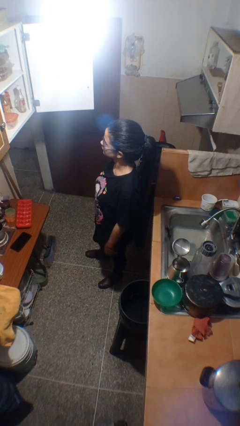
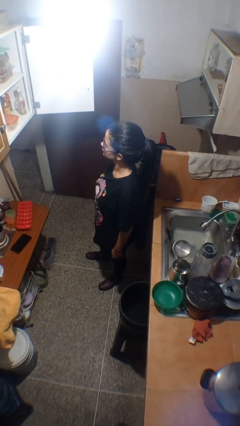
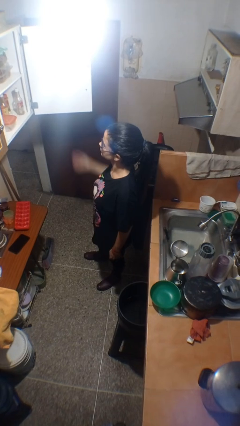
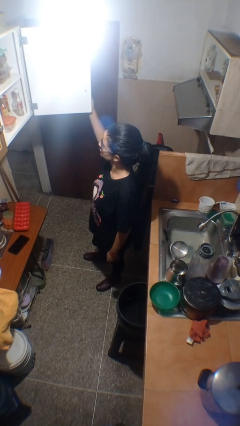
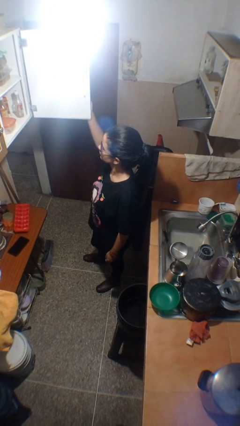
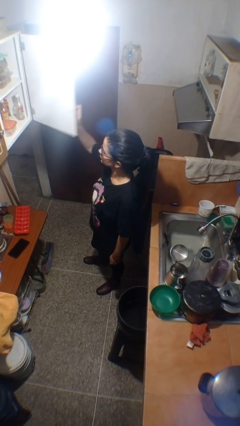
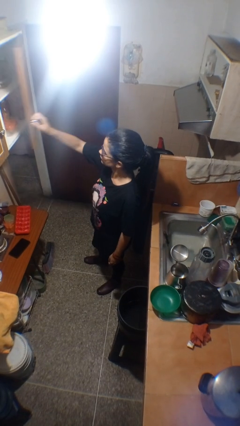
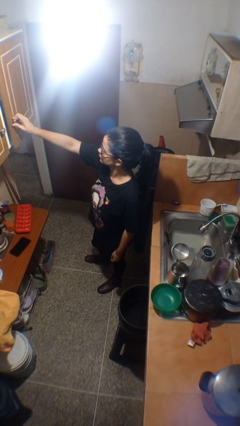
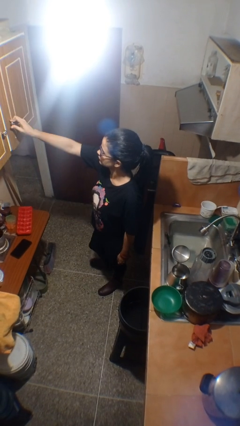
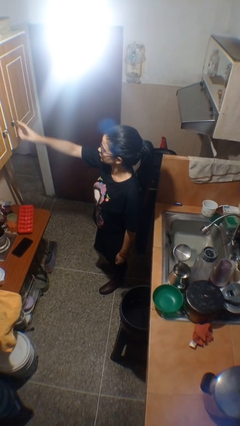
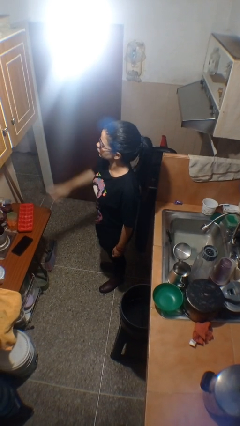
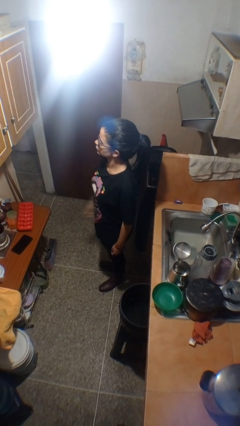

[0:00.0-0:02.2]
person closes cabinet

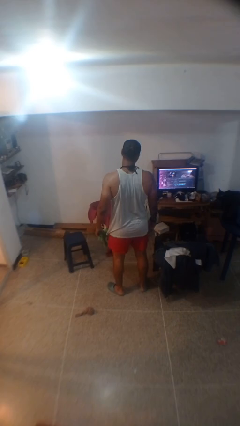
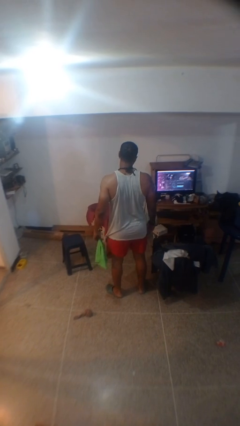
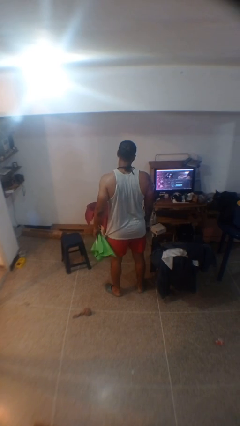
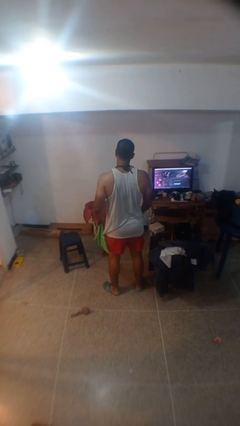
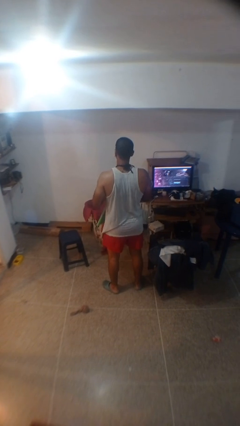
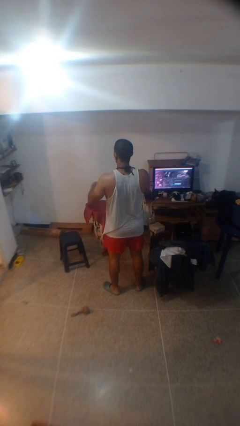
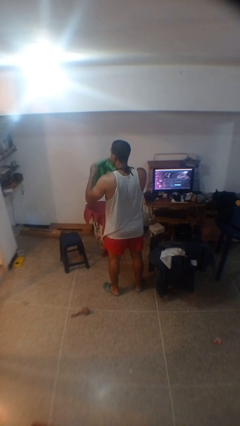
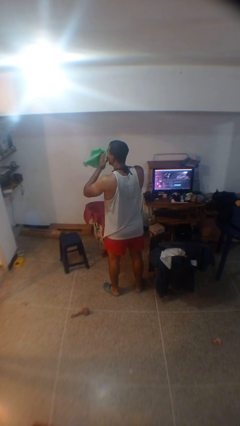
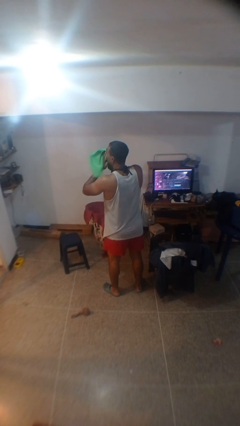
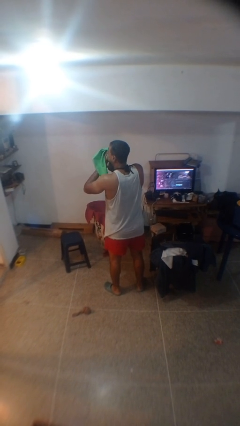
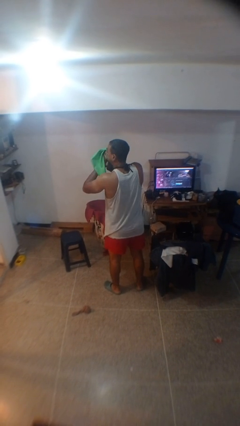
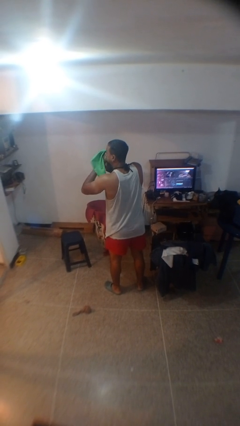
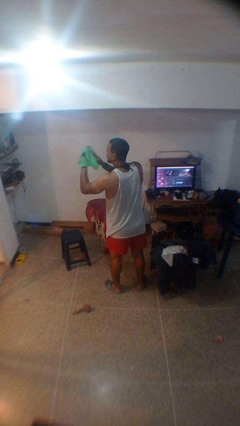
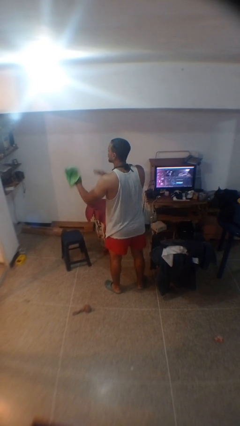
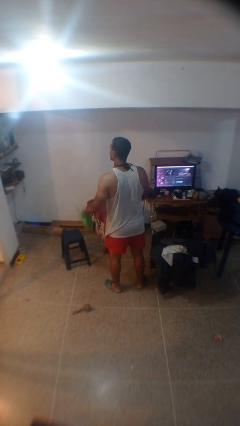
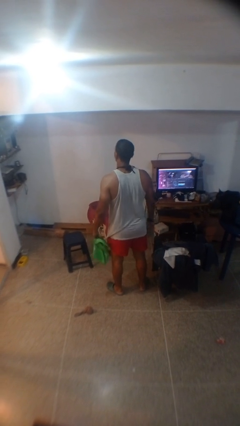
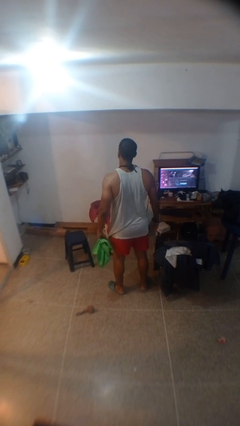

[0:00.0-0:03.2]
person blows nose

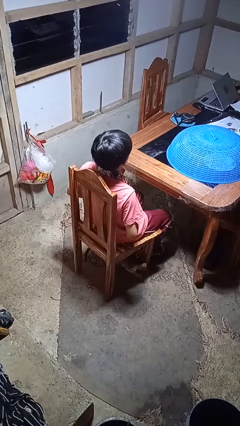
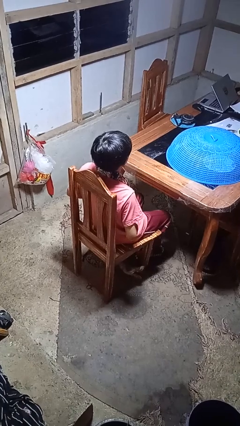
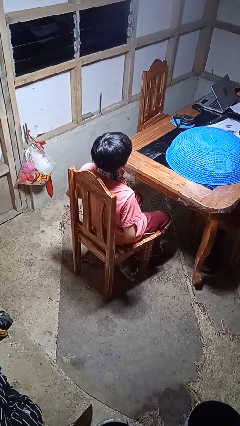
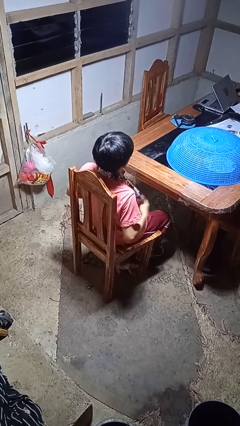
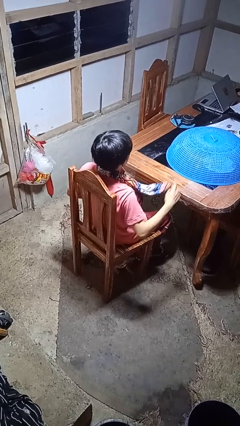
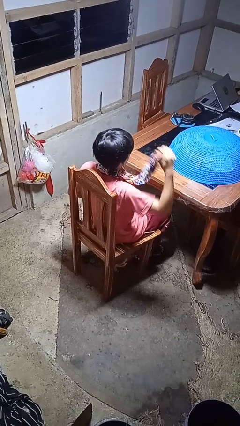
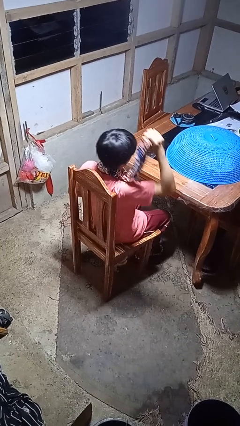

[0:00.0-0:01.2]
person takes off scarf

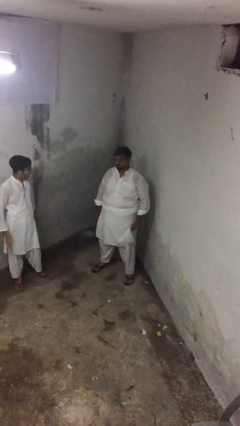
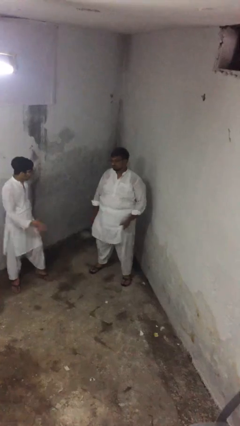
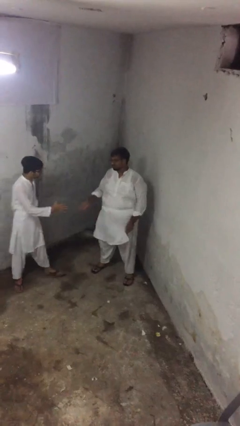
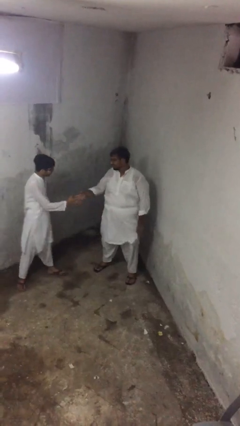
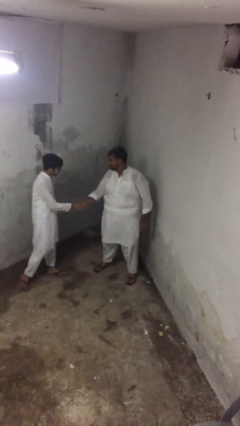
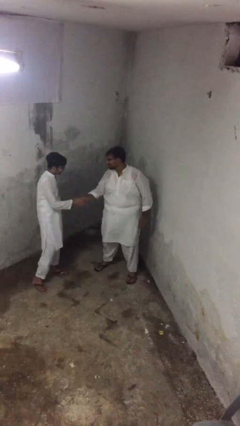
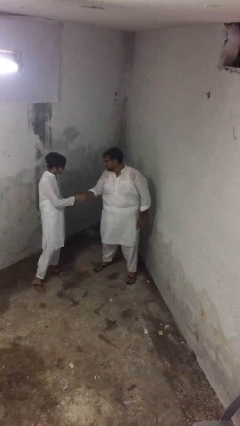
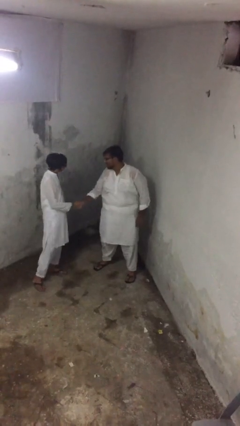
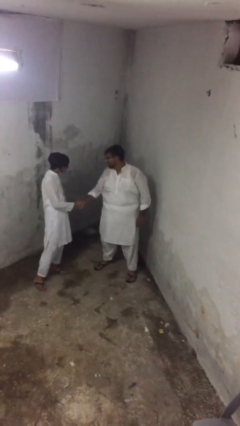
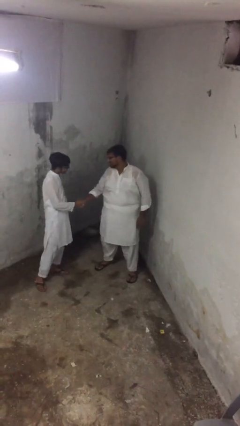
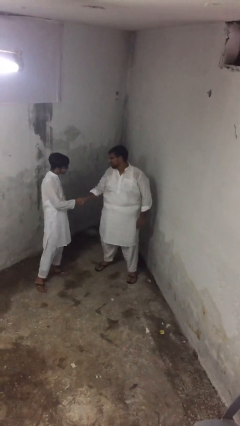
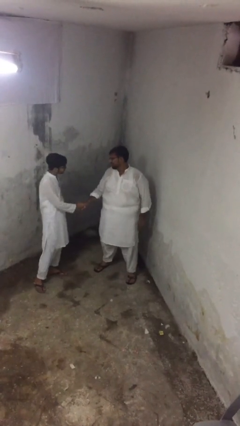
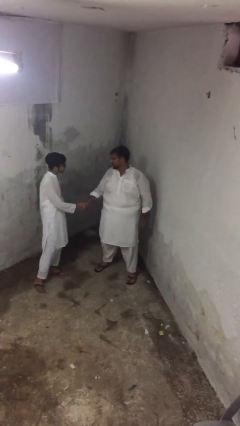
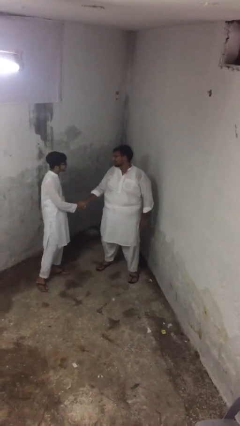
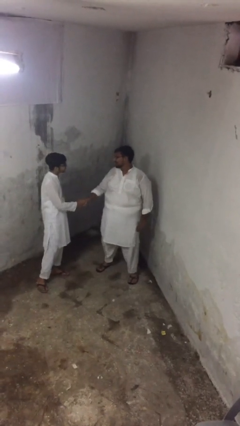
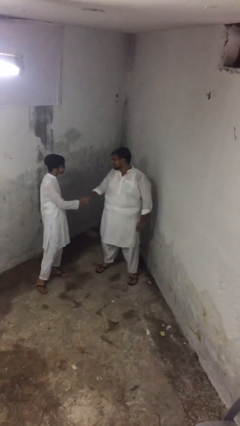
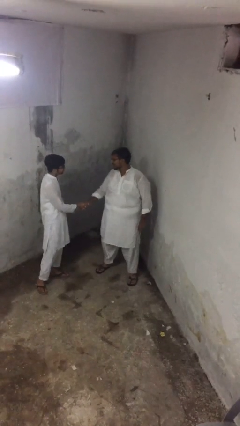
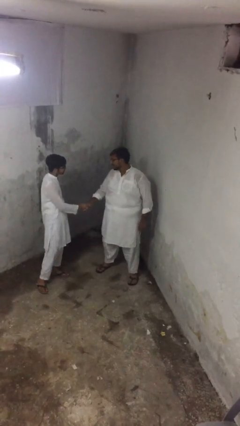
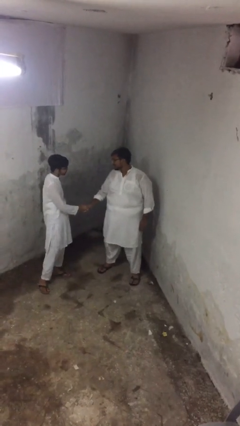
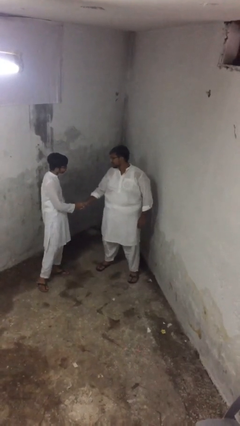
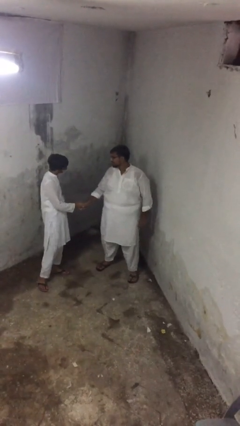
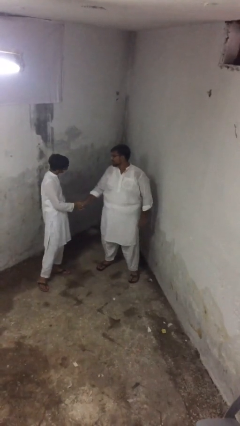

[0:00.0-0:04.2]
person shakes hand

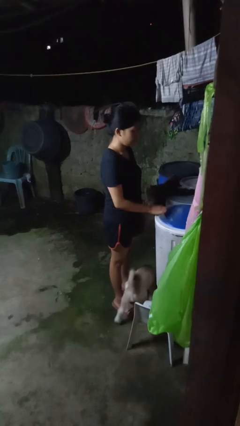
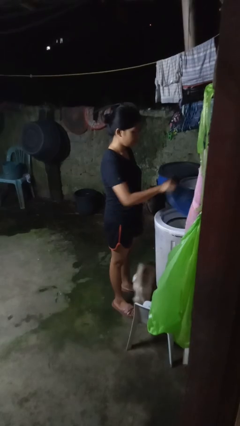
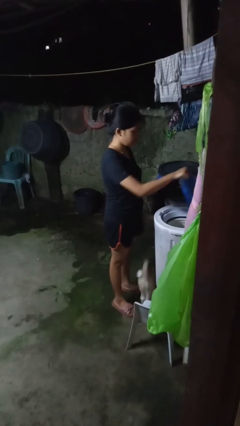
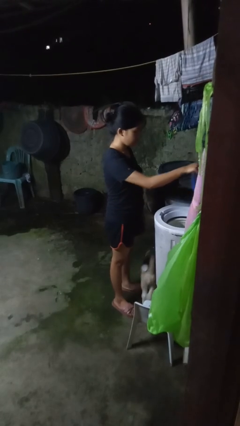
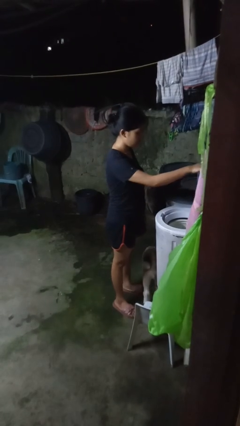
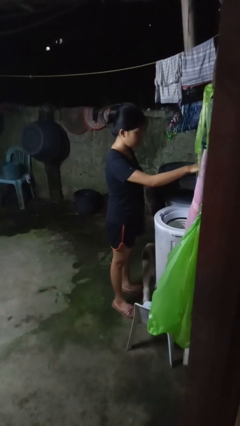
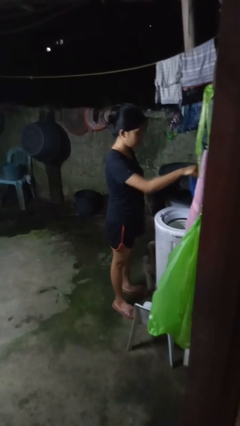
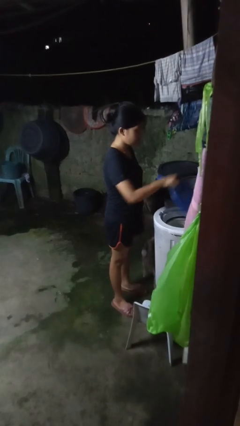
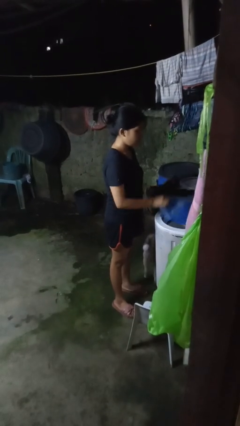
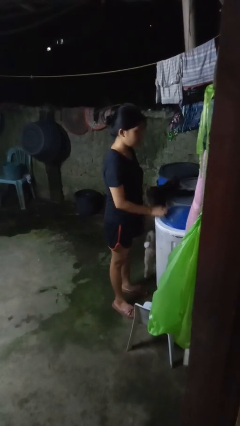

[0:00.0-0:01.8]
person opens clothes washer

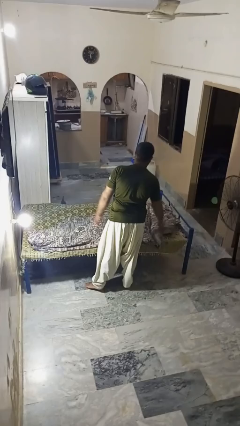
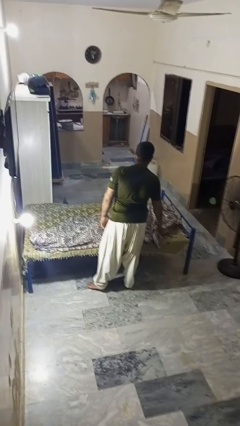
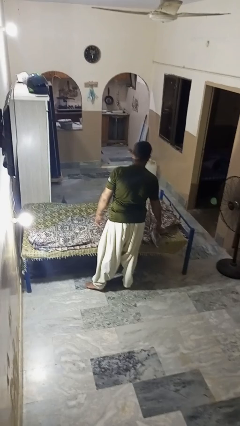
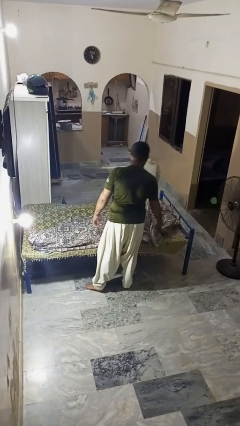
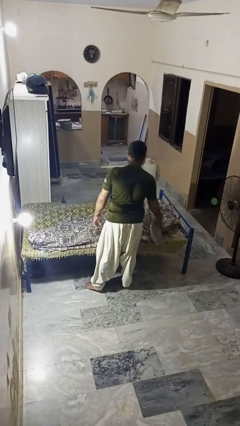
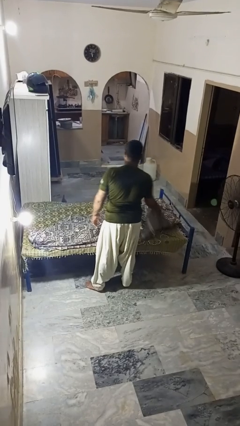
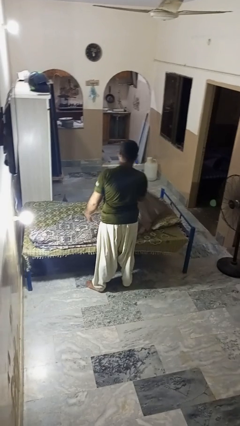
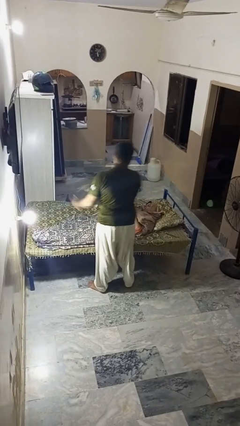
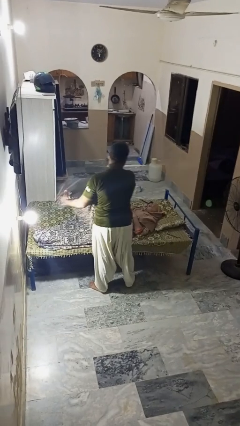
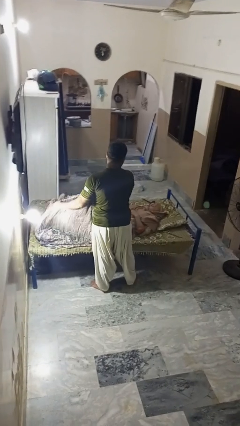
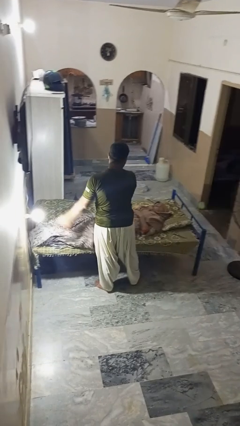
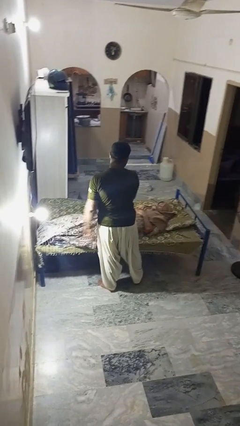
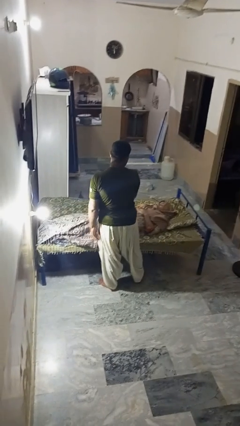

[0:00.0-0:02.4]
person uncovers friend with blanket

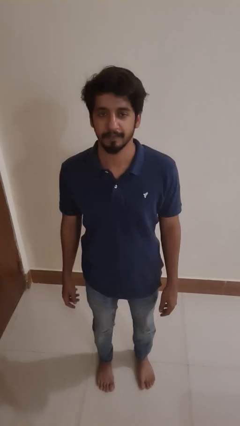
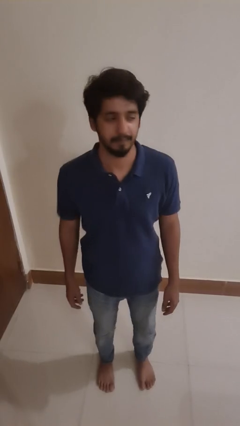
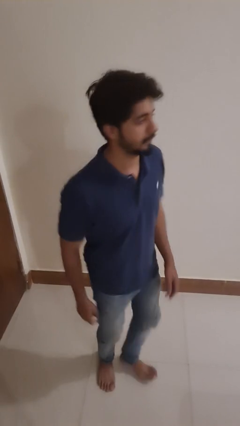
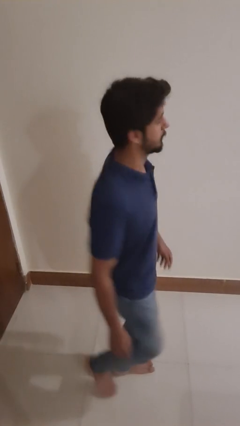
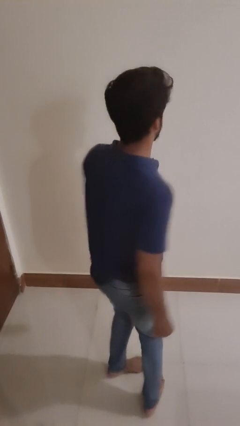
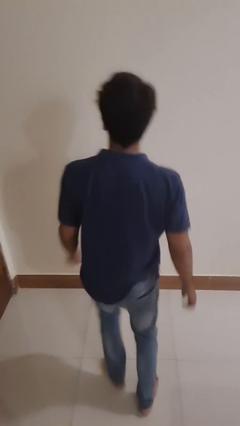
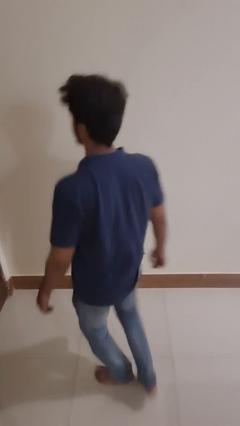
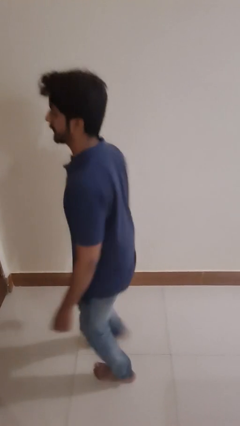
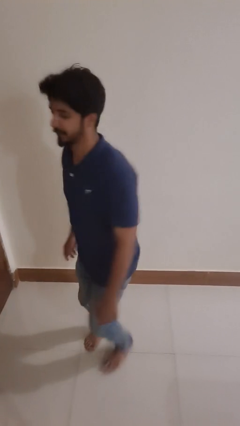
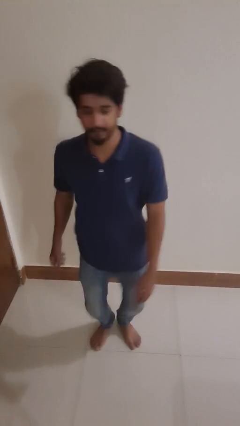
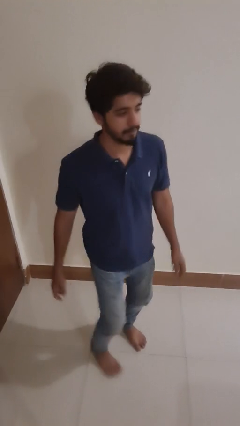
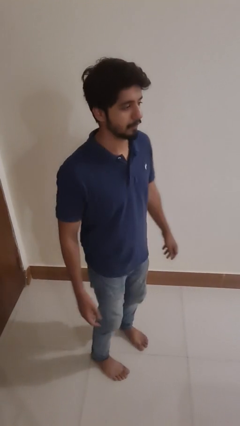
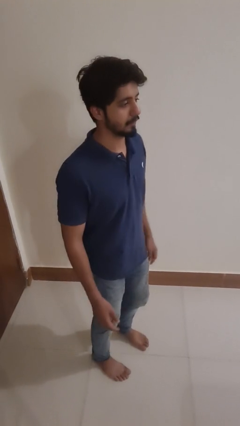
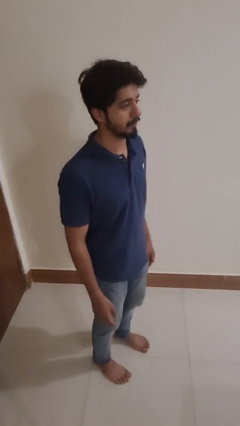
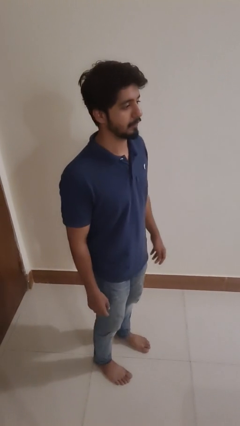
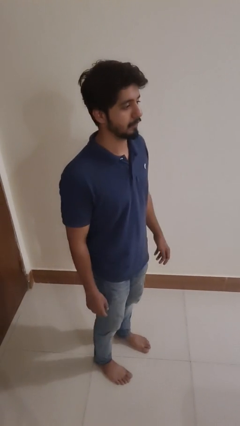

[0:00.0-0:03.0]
person twirls
